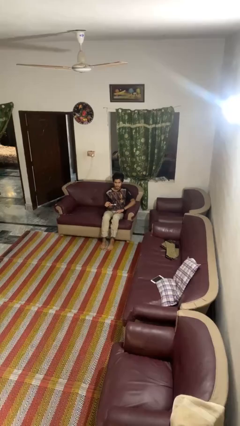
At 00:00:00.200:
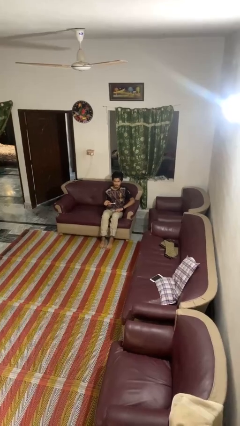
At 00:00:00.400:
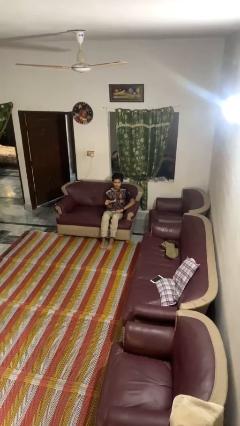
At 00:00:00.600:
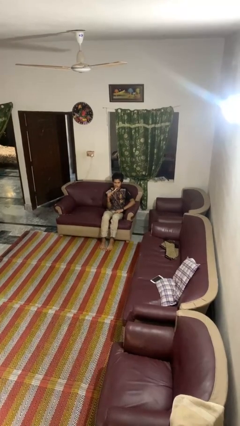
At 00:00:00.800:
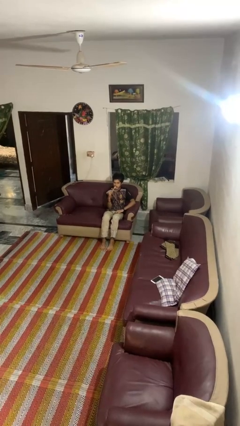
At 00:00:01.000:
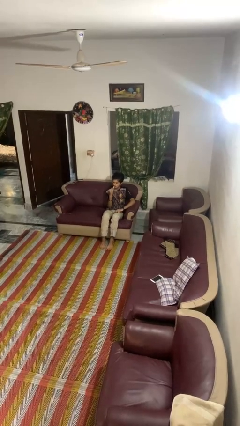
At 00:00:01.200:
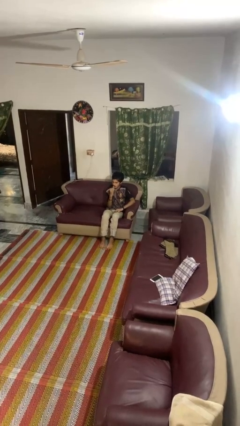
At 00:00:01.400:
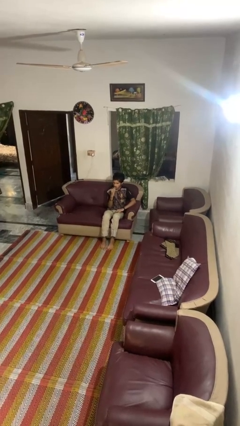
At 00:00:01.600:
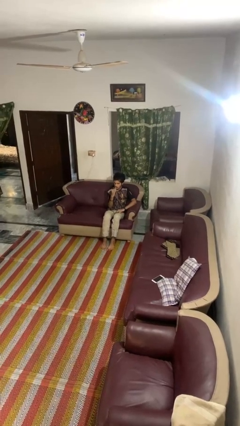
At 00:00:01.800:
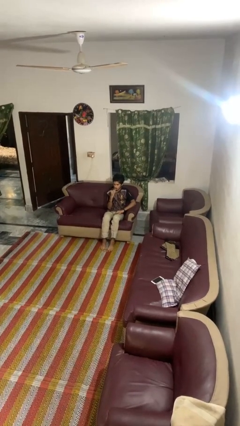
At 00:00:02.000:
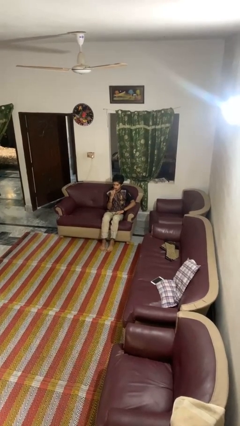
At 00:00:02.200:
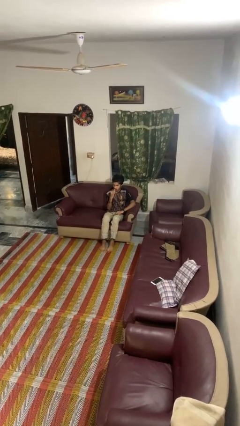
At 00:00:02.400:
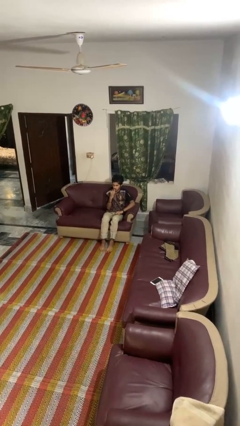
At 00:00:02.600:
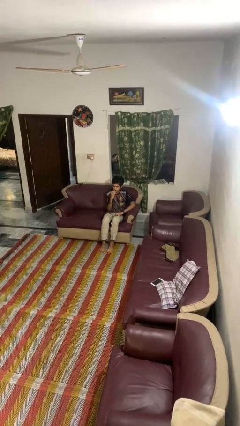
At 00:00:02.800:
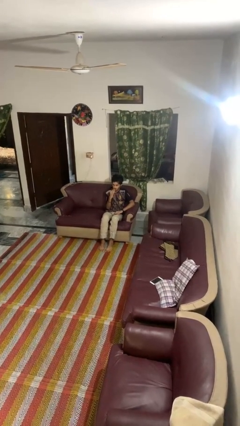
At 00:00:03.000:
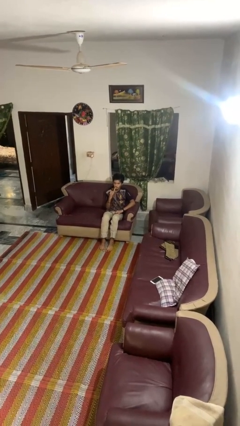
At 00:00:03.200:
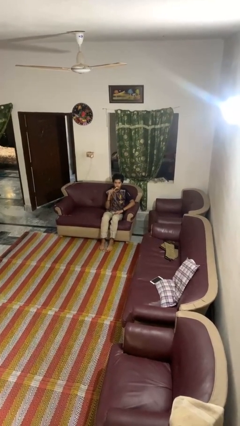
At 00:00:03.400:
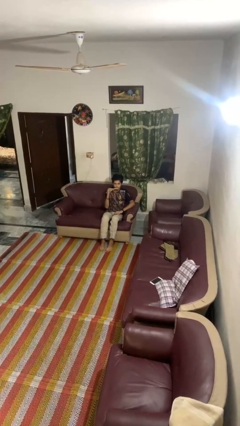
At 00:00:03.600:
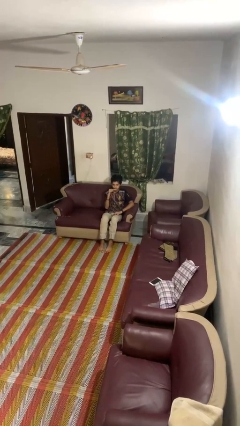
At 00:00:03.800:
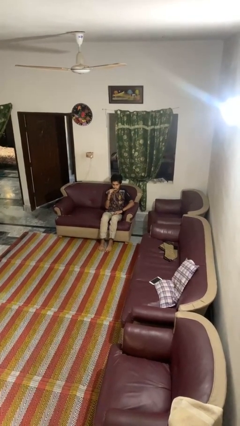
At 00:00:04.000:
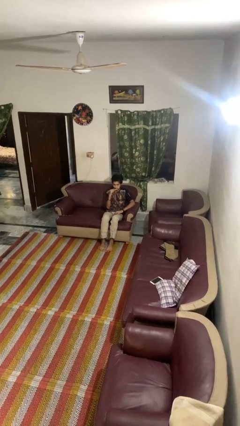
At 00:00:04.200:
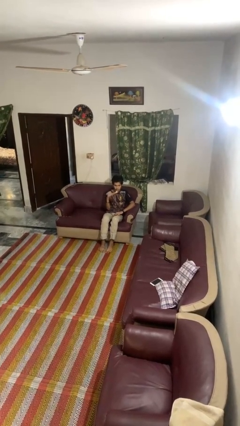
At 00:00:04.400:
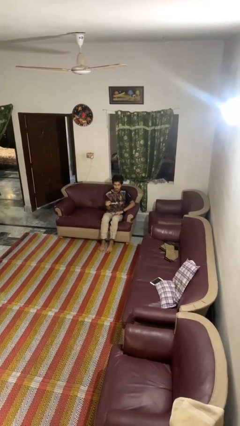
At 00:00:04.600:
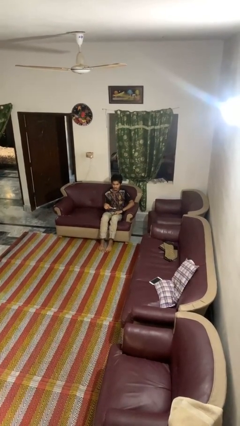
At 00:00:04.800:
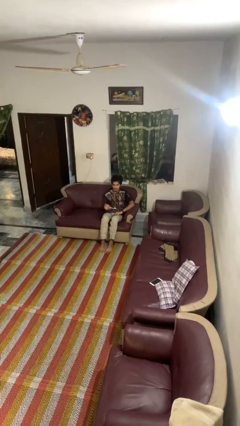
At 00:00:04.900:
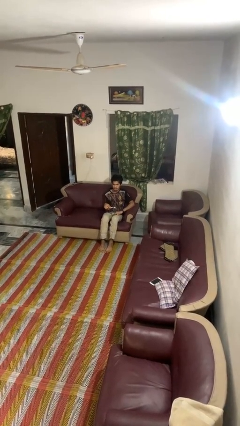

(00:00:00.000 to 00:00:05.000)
person brushes teeth

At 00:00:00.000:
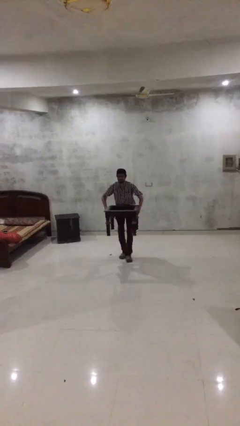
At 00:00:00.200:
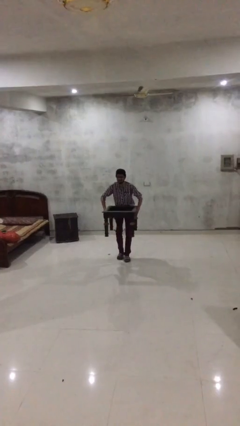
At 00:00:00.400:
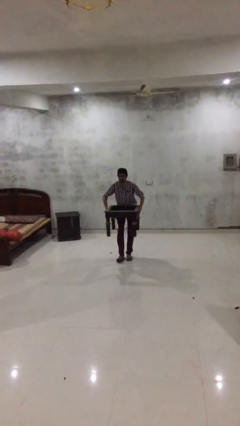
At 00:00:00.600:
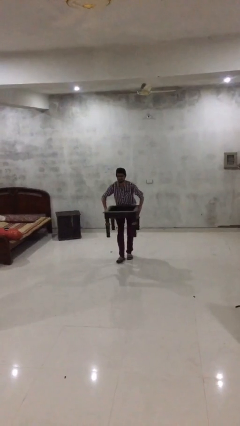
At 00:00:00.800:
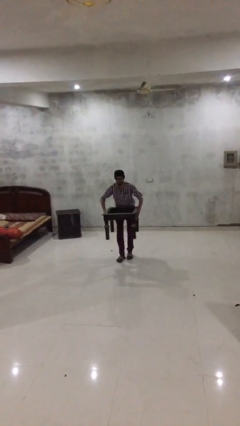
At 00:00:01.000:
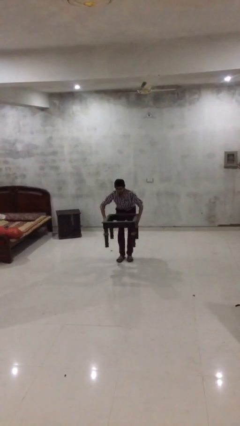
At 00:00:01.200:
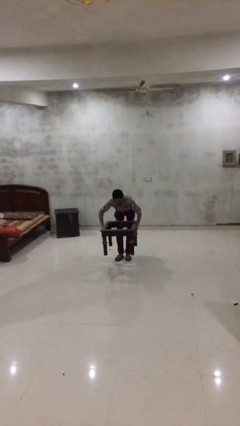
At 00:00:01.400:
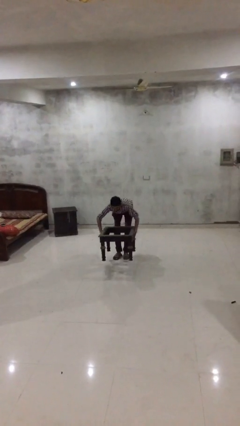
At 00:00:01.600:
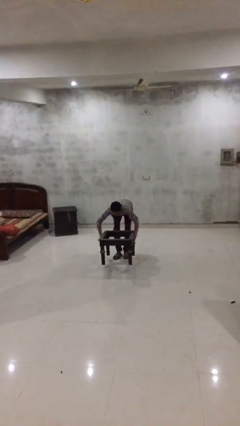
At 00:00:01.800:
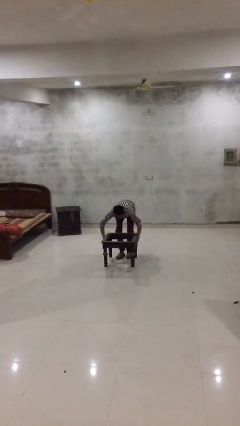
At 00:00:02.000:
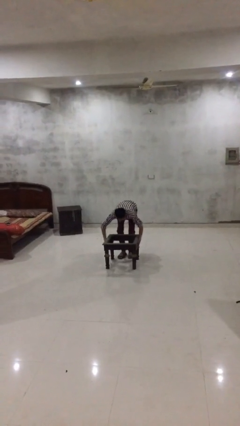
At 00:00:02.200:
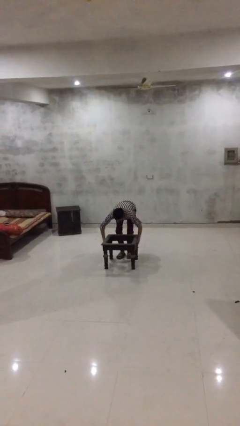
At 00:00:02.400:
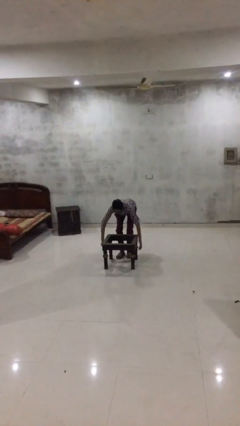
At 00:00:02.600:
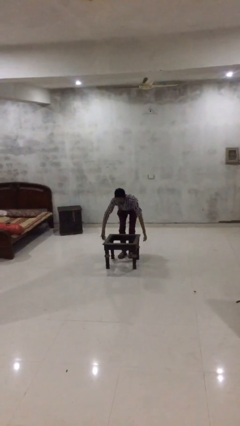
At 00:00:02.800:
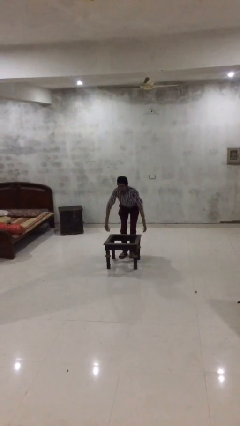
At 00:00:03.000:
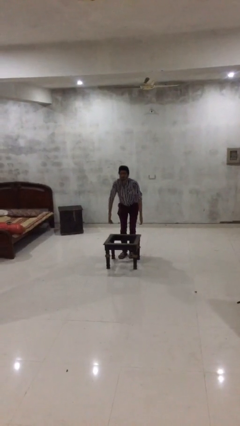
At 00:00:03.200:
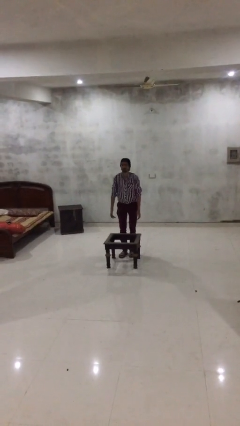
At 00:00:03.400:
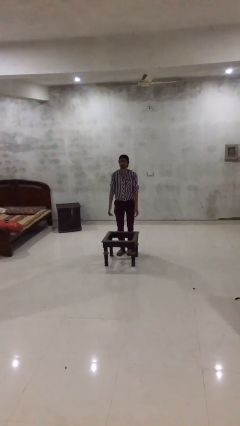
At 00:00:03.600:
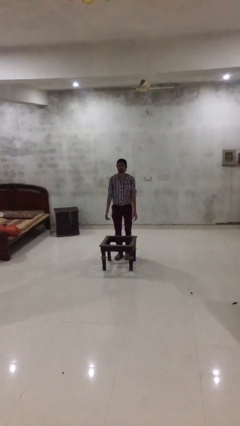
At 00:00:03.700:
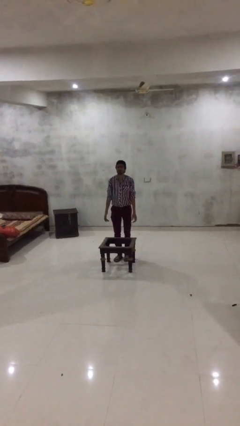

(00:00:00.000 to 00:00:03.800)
person puts down object on floor

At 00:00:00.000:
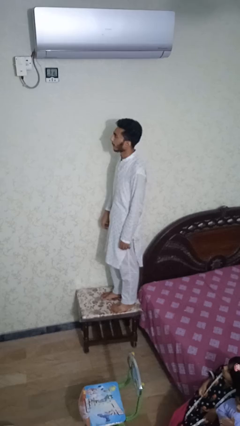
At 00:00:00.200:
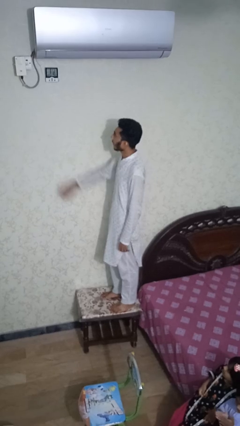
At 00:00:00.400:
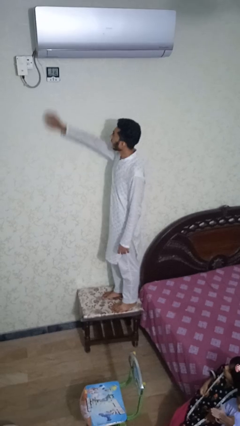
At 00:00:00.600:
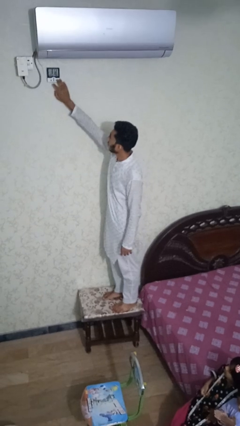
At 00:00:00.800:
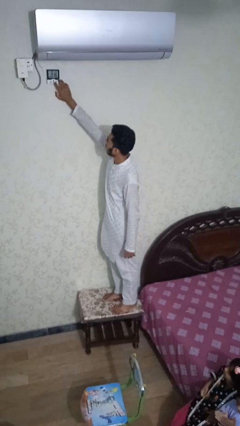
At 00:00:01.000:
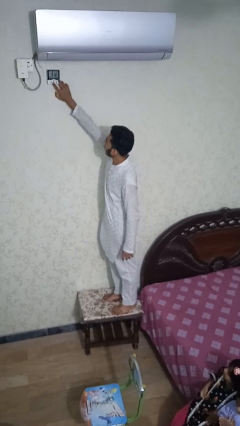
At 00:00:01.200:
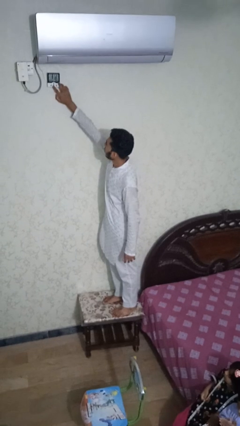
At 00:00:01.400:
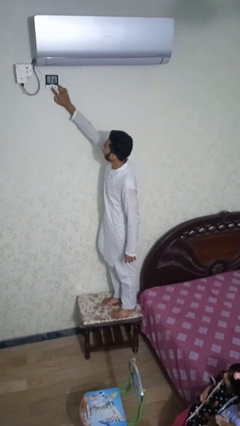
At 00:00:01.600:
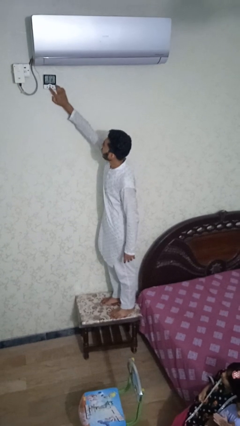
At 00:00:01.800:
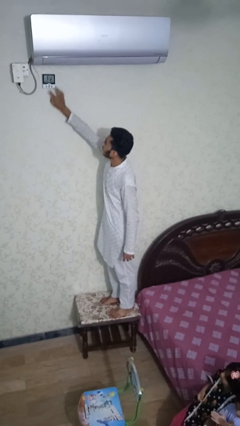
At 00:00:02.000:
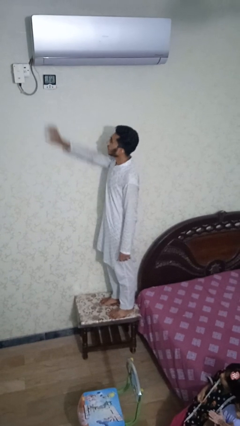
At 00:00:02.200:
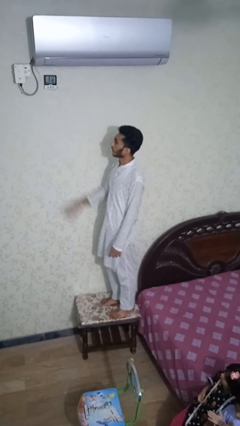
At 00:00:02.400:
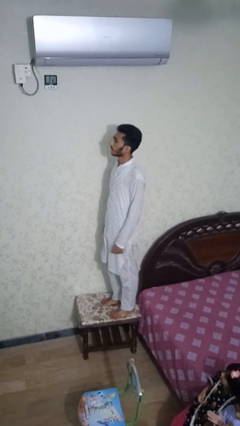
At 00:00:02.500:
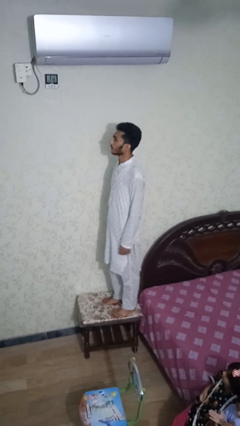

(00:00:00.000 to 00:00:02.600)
person adjusts thermostat

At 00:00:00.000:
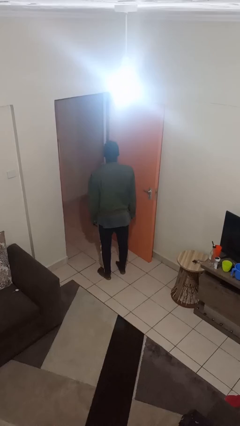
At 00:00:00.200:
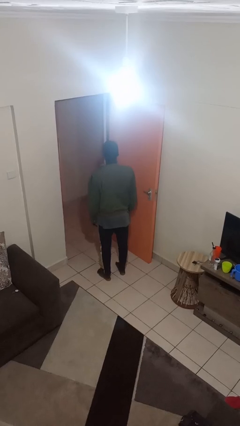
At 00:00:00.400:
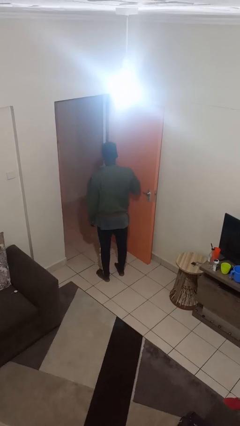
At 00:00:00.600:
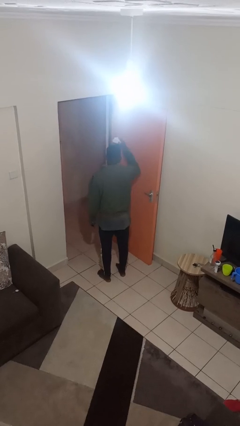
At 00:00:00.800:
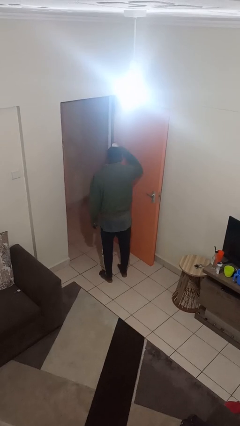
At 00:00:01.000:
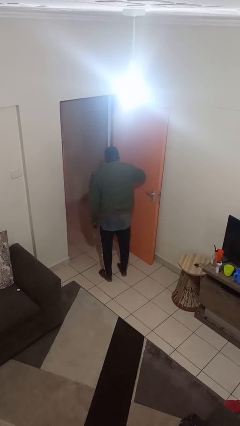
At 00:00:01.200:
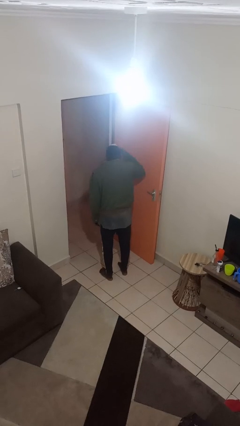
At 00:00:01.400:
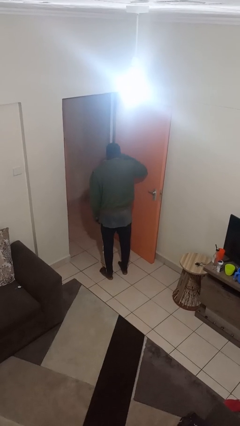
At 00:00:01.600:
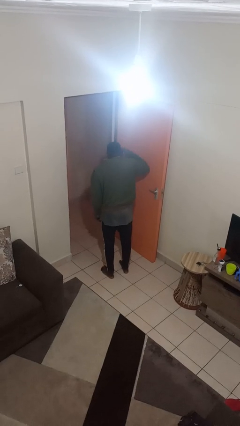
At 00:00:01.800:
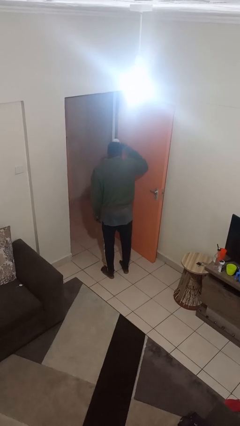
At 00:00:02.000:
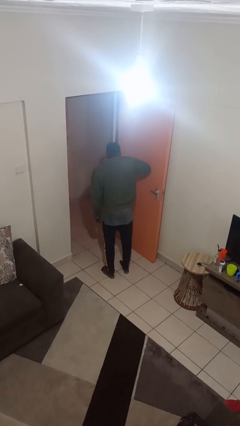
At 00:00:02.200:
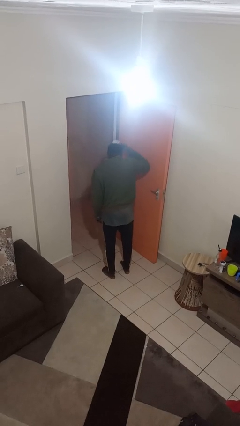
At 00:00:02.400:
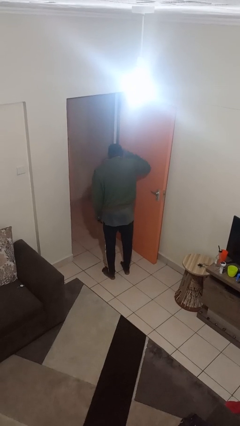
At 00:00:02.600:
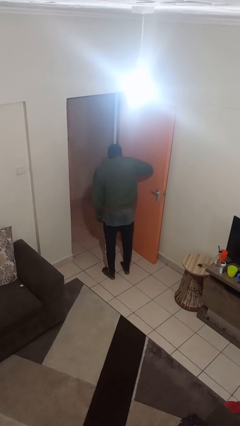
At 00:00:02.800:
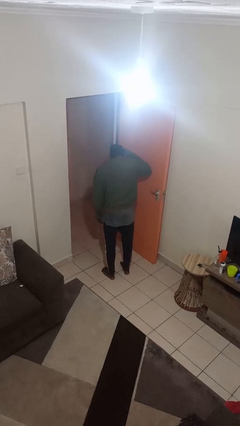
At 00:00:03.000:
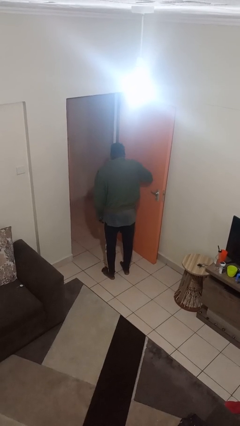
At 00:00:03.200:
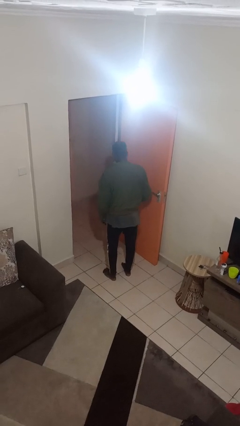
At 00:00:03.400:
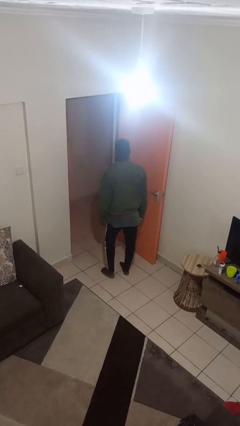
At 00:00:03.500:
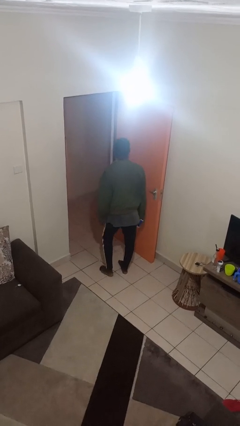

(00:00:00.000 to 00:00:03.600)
person brushes hair

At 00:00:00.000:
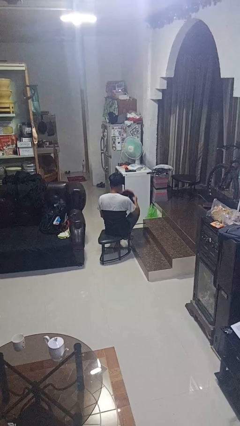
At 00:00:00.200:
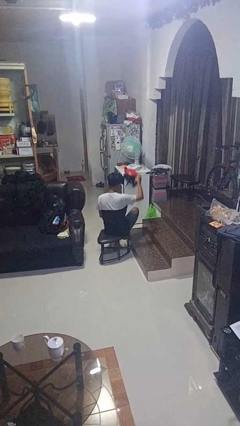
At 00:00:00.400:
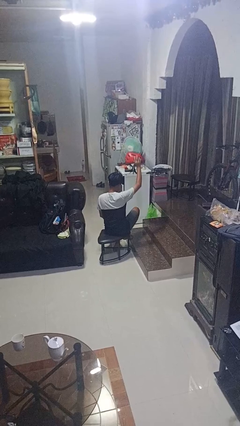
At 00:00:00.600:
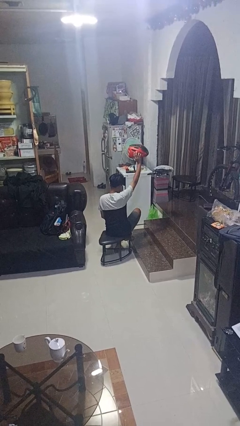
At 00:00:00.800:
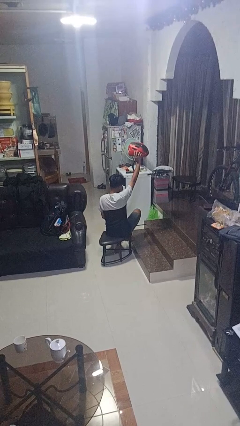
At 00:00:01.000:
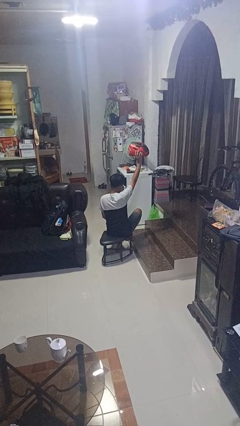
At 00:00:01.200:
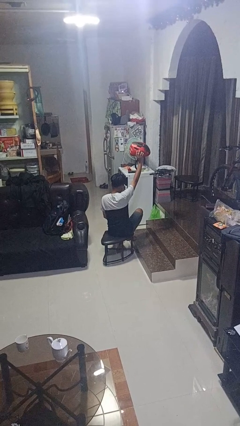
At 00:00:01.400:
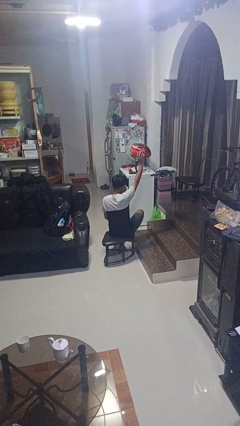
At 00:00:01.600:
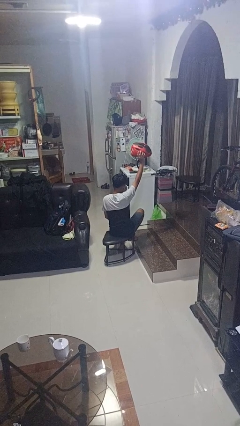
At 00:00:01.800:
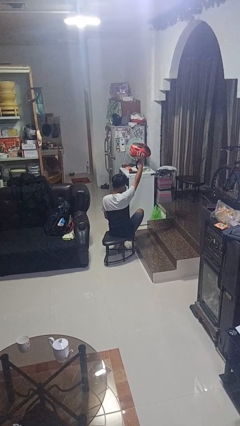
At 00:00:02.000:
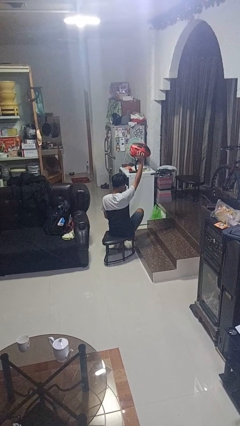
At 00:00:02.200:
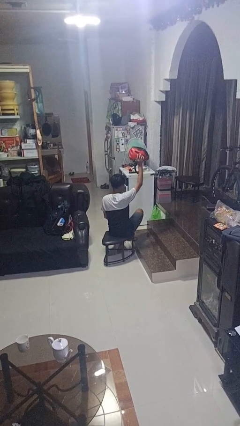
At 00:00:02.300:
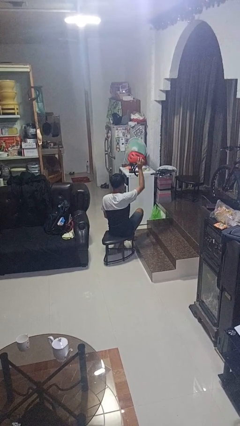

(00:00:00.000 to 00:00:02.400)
person holds object above head
